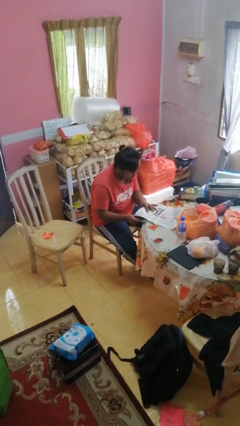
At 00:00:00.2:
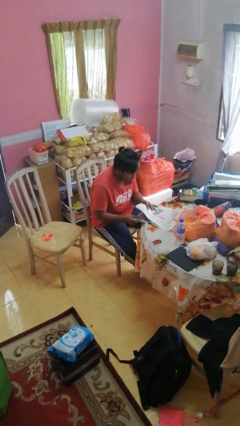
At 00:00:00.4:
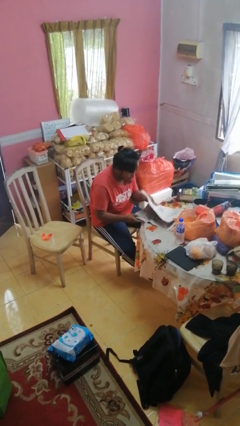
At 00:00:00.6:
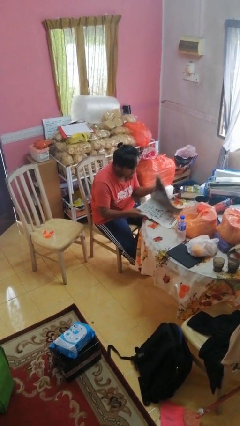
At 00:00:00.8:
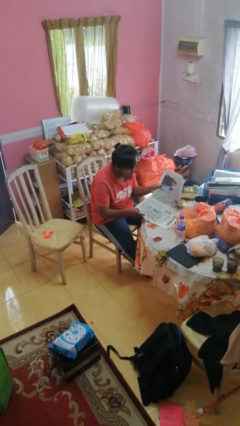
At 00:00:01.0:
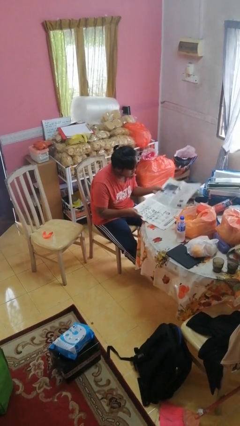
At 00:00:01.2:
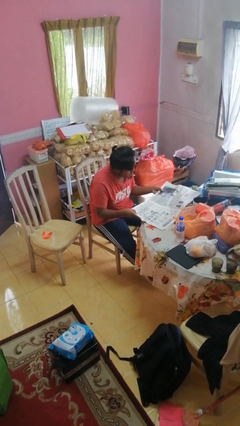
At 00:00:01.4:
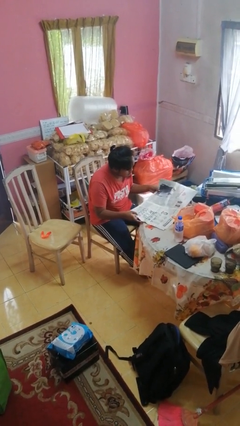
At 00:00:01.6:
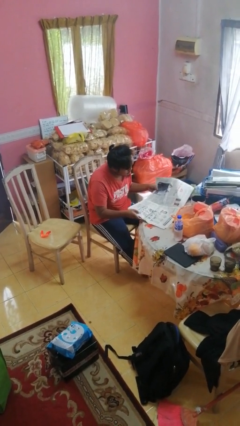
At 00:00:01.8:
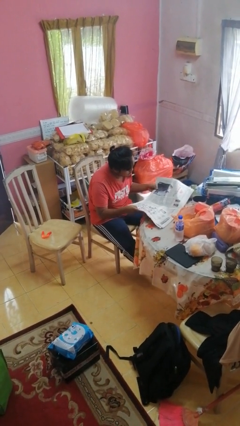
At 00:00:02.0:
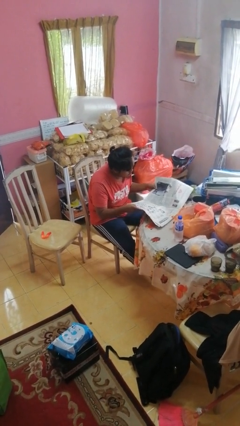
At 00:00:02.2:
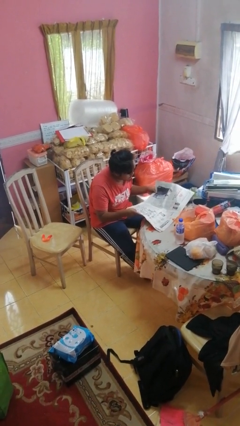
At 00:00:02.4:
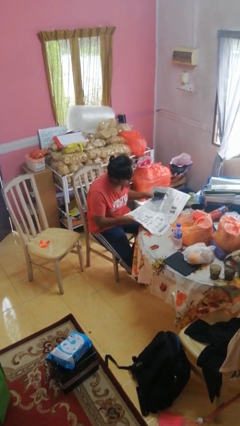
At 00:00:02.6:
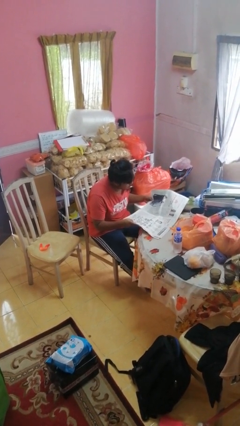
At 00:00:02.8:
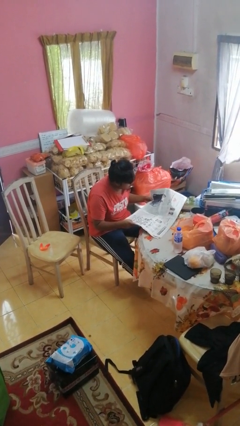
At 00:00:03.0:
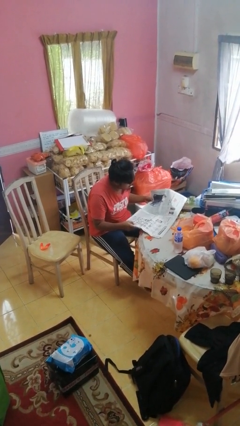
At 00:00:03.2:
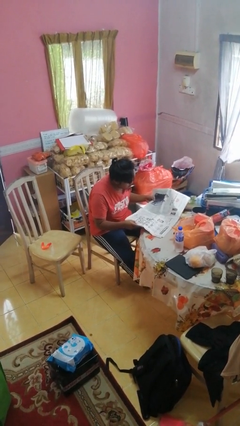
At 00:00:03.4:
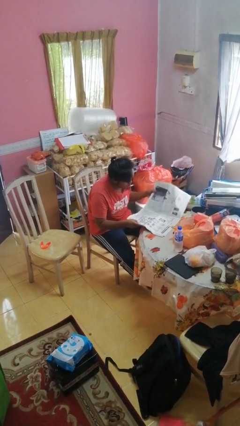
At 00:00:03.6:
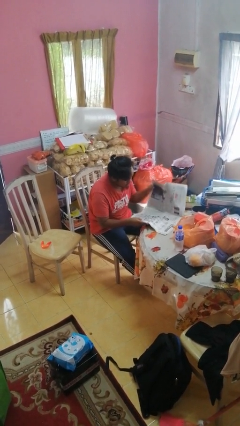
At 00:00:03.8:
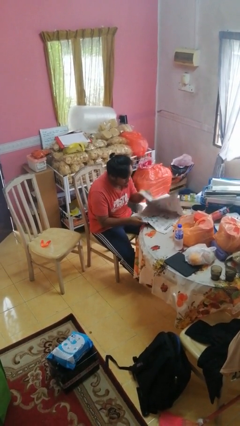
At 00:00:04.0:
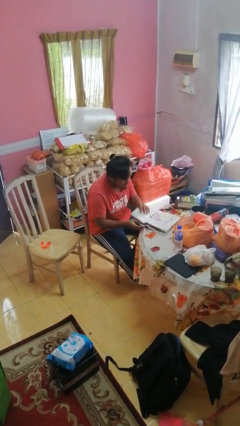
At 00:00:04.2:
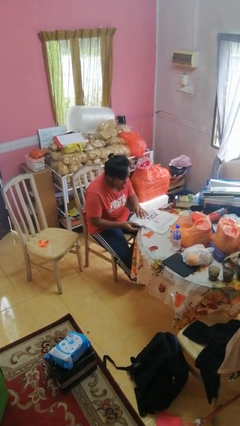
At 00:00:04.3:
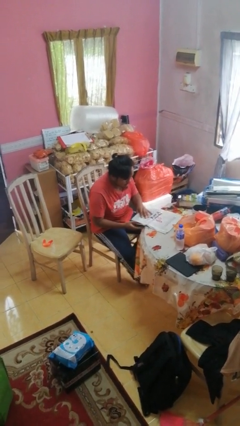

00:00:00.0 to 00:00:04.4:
person reads newspaper

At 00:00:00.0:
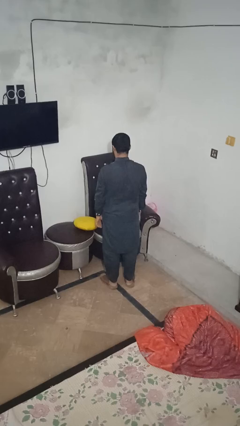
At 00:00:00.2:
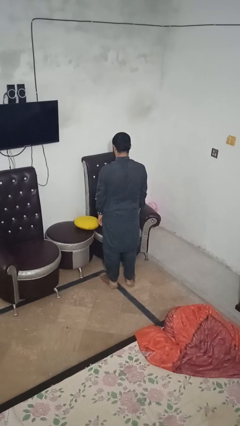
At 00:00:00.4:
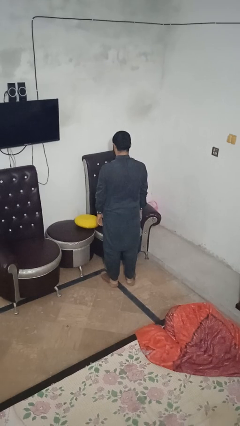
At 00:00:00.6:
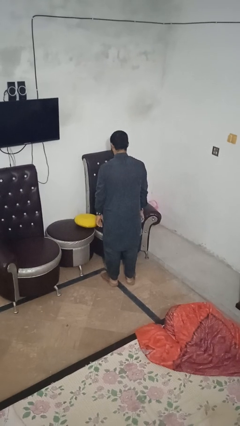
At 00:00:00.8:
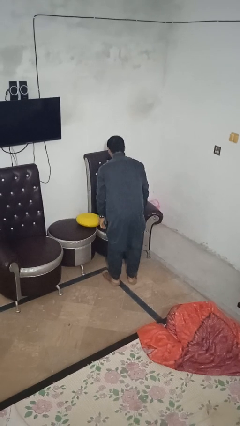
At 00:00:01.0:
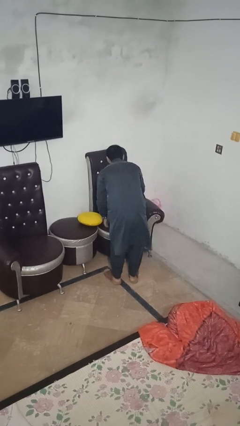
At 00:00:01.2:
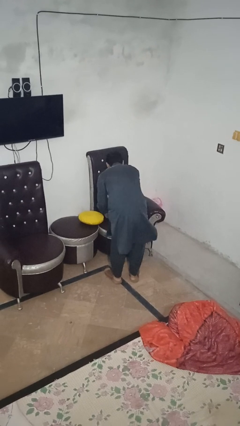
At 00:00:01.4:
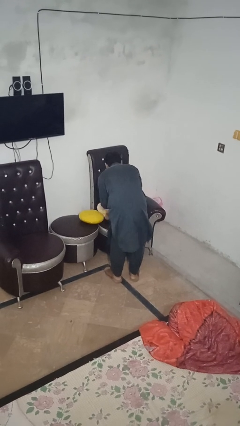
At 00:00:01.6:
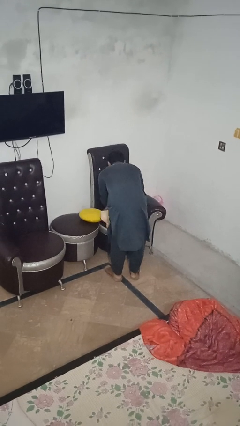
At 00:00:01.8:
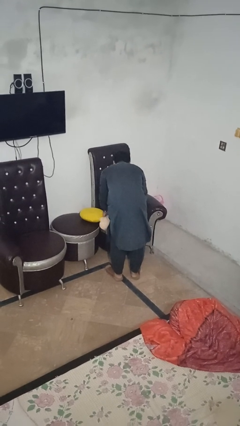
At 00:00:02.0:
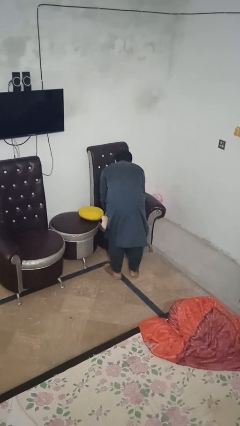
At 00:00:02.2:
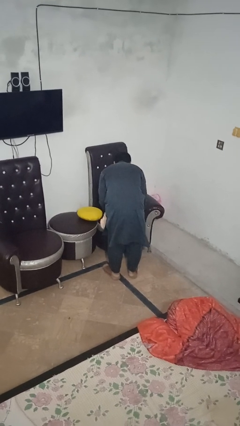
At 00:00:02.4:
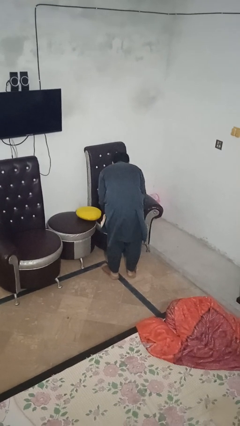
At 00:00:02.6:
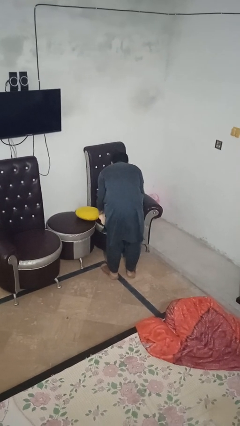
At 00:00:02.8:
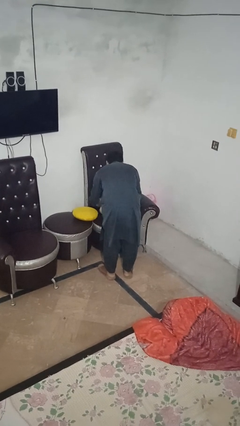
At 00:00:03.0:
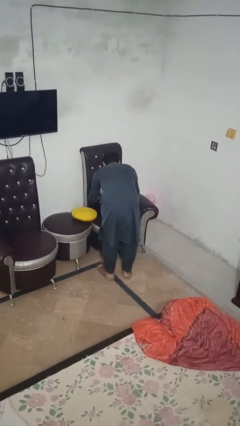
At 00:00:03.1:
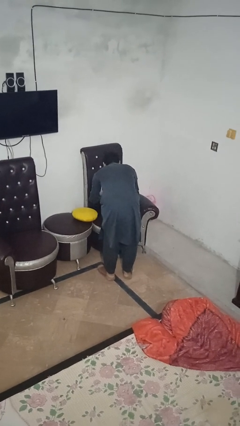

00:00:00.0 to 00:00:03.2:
person searches in couch

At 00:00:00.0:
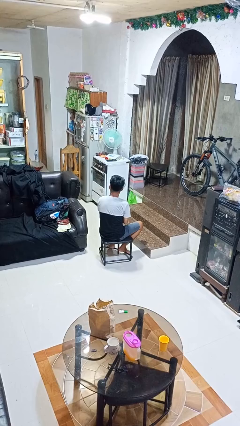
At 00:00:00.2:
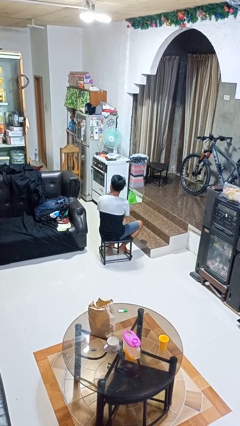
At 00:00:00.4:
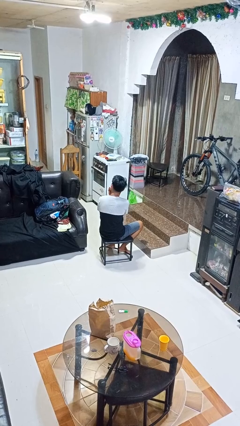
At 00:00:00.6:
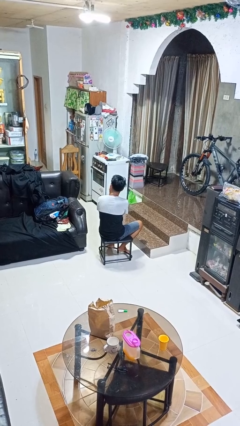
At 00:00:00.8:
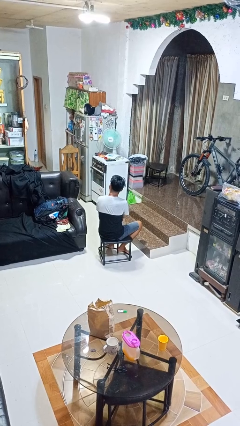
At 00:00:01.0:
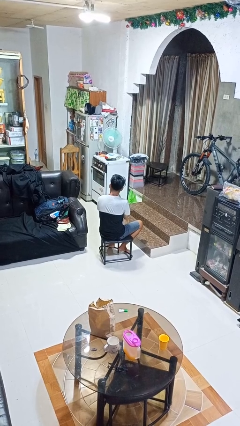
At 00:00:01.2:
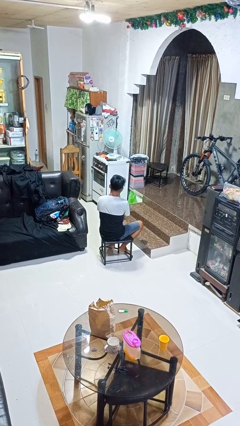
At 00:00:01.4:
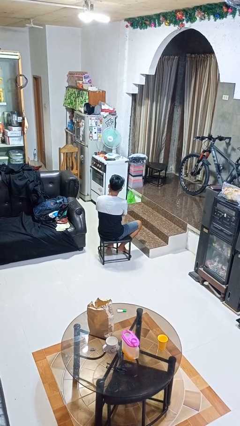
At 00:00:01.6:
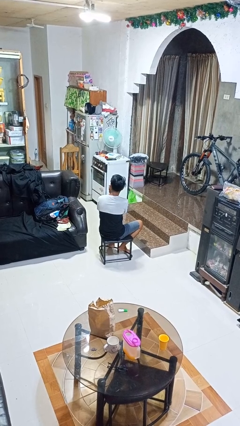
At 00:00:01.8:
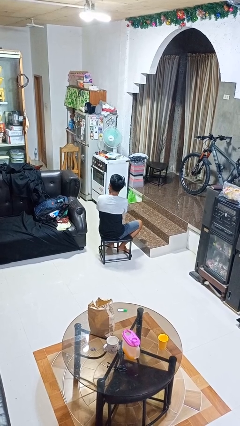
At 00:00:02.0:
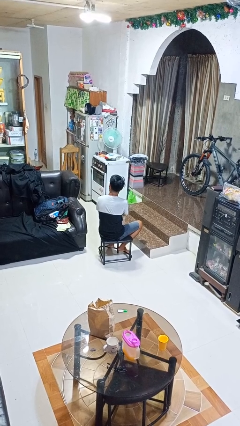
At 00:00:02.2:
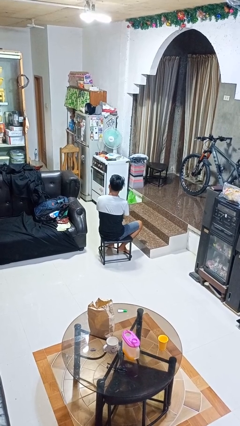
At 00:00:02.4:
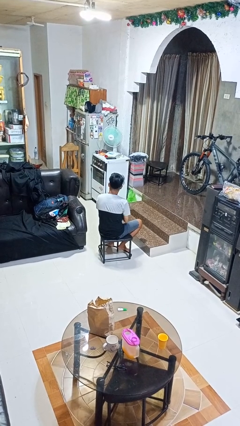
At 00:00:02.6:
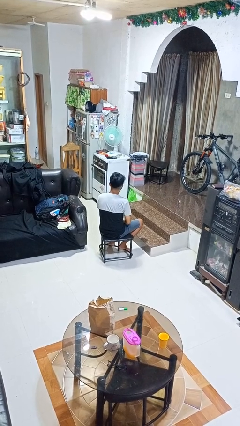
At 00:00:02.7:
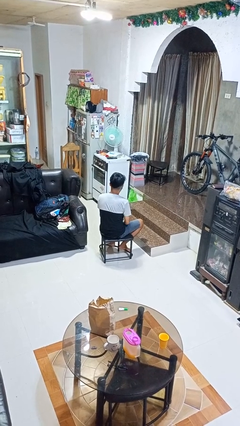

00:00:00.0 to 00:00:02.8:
person strokes chin

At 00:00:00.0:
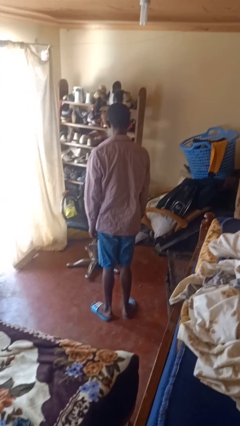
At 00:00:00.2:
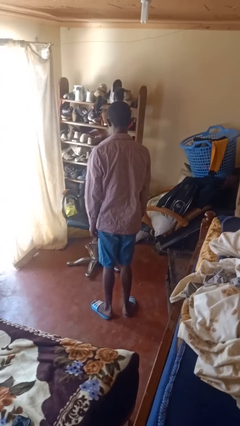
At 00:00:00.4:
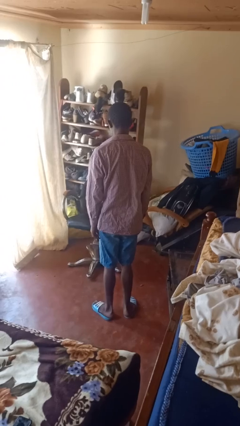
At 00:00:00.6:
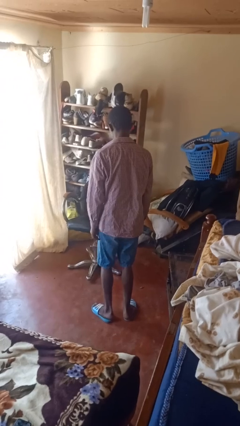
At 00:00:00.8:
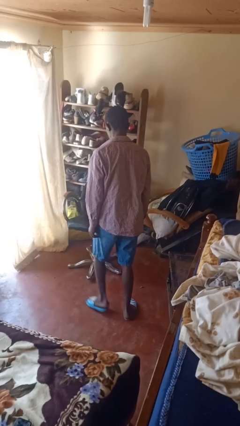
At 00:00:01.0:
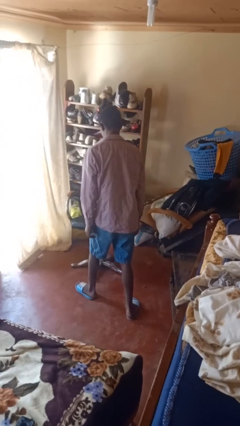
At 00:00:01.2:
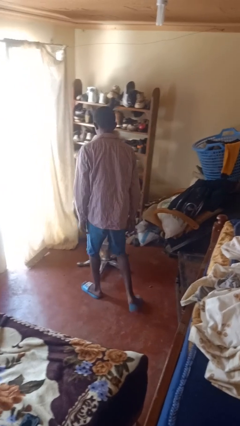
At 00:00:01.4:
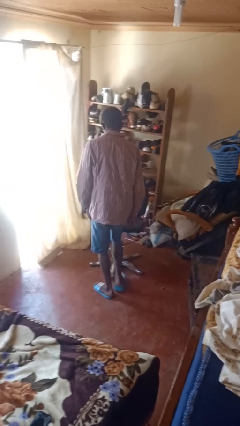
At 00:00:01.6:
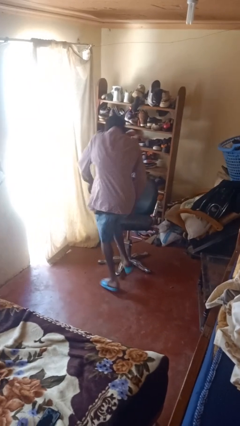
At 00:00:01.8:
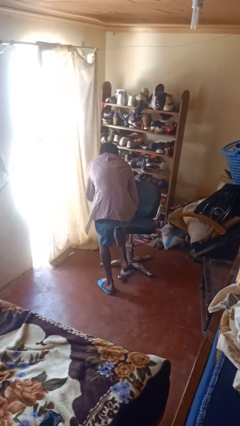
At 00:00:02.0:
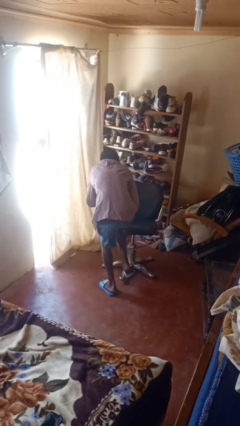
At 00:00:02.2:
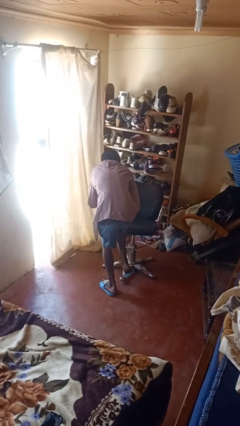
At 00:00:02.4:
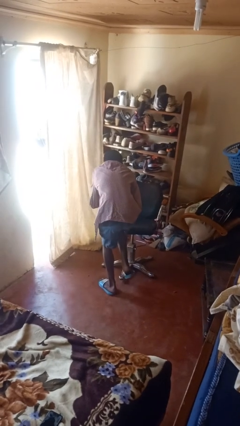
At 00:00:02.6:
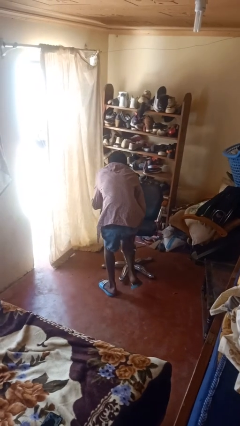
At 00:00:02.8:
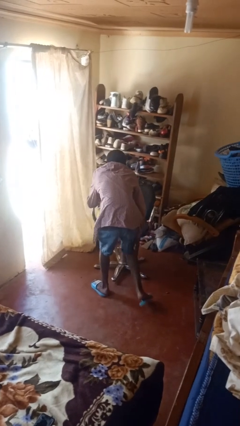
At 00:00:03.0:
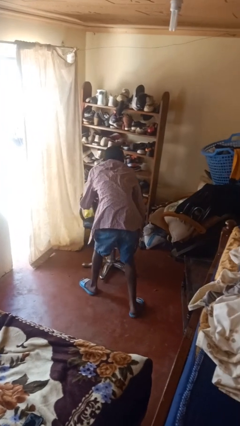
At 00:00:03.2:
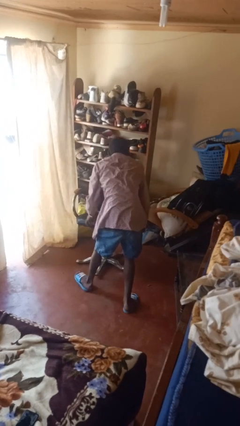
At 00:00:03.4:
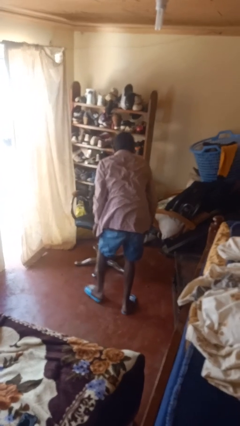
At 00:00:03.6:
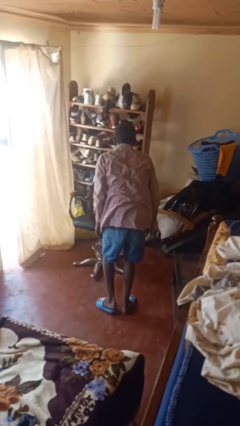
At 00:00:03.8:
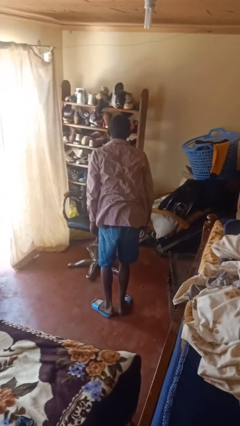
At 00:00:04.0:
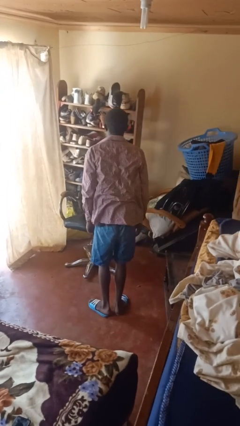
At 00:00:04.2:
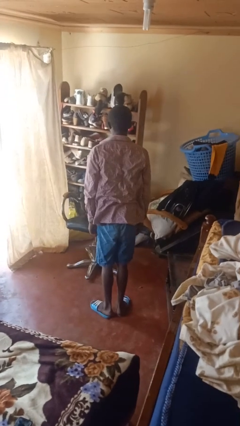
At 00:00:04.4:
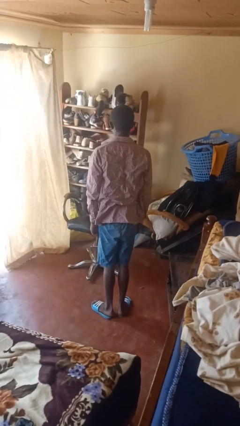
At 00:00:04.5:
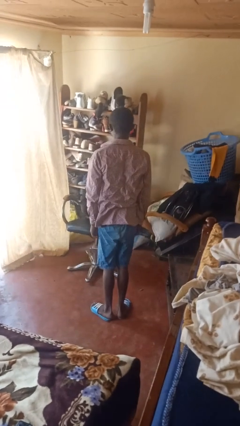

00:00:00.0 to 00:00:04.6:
person stubs toe

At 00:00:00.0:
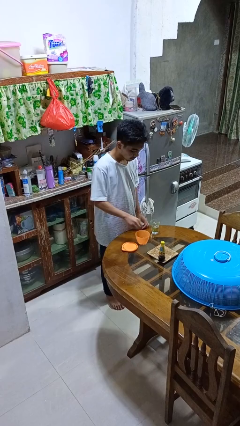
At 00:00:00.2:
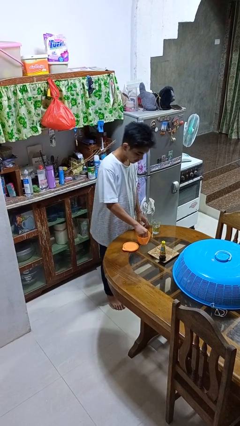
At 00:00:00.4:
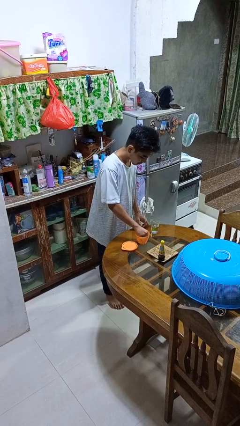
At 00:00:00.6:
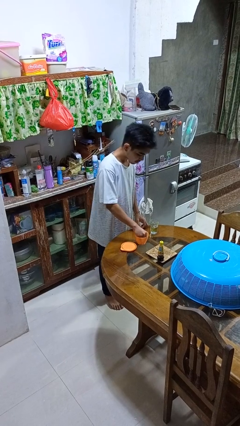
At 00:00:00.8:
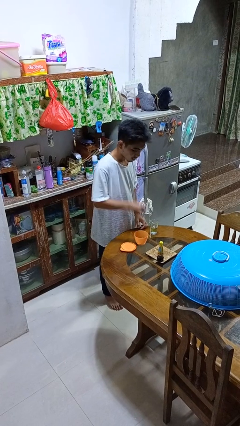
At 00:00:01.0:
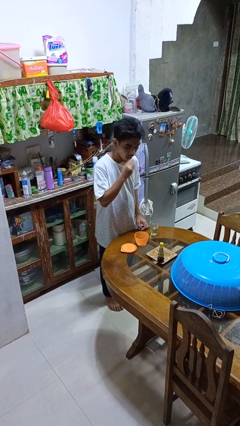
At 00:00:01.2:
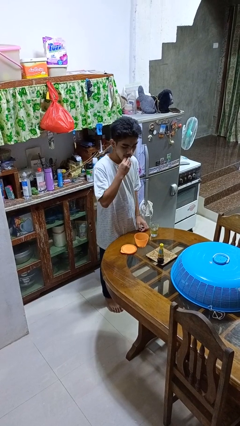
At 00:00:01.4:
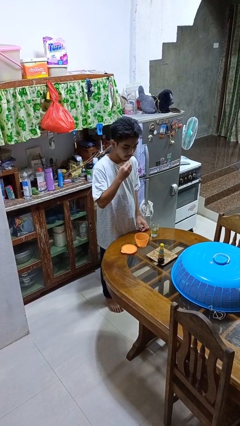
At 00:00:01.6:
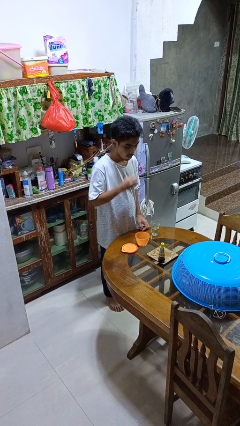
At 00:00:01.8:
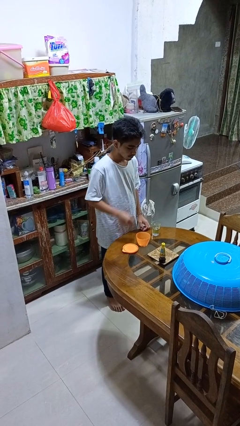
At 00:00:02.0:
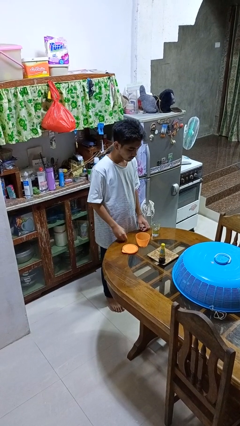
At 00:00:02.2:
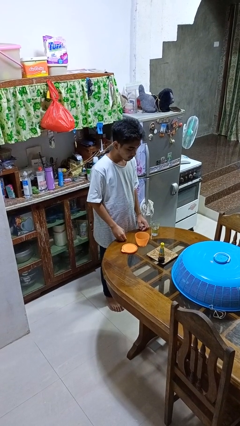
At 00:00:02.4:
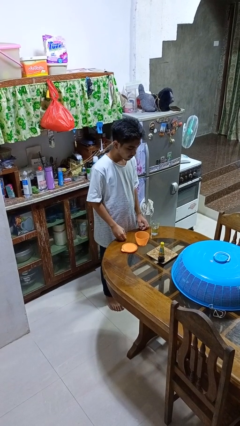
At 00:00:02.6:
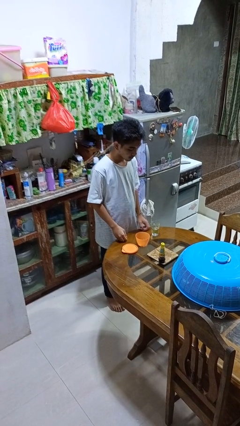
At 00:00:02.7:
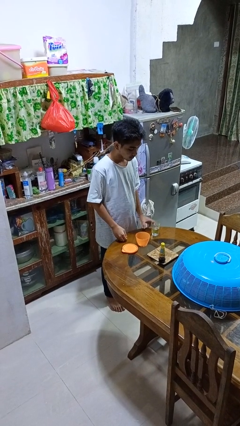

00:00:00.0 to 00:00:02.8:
person takes medicine pills
